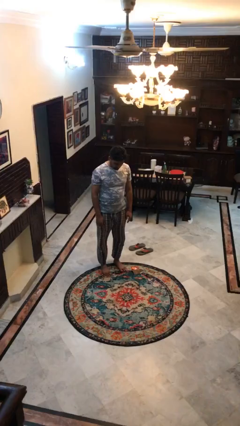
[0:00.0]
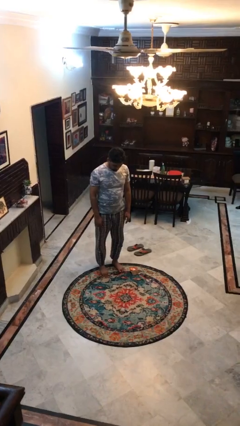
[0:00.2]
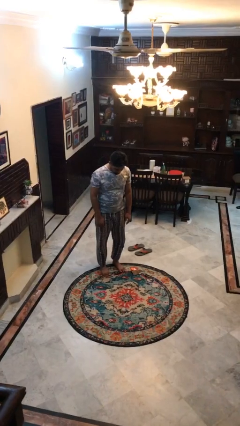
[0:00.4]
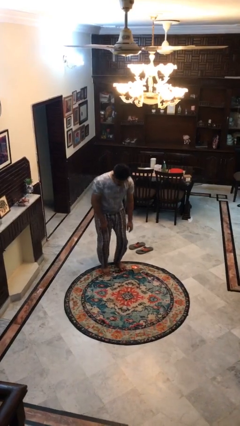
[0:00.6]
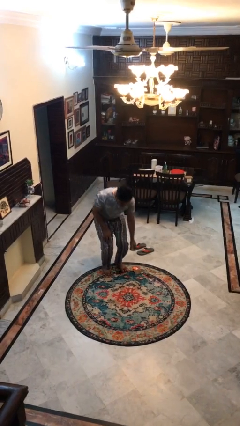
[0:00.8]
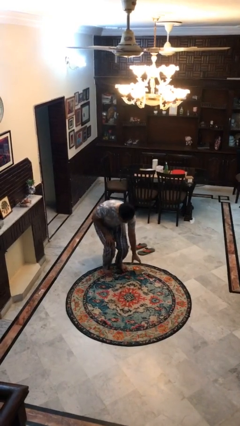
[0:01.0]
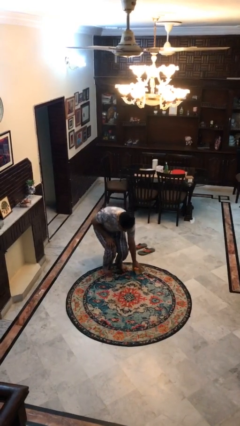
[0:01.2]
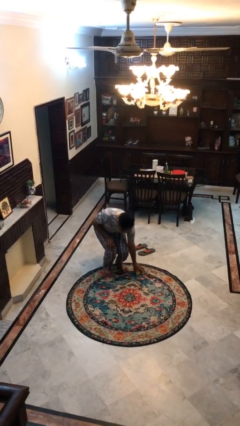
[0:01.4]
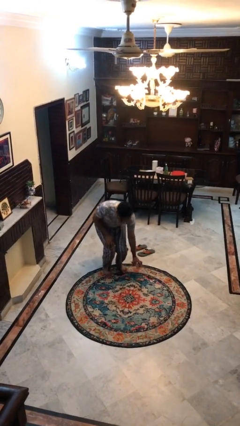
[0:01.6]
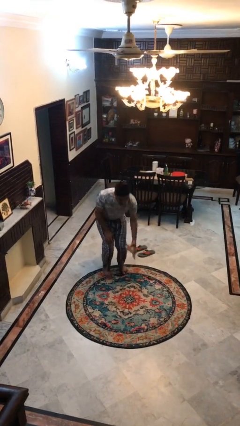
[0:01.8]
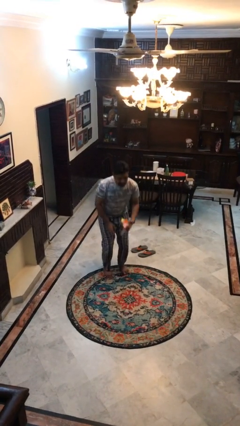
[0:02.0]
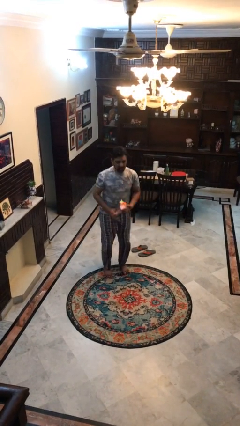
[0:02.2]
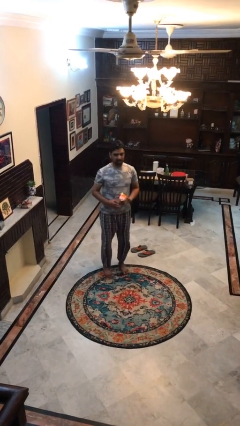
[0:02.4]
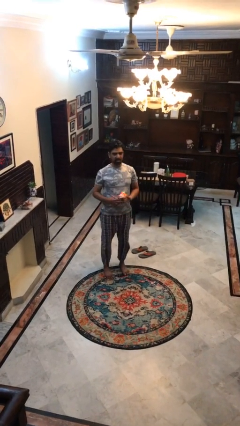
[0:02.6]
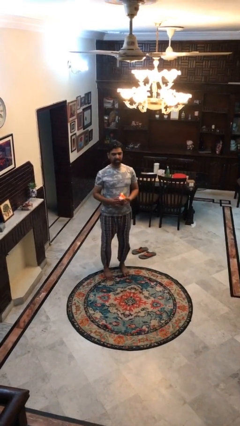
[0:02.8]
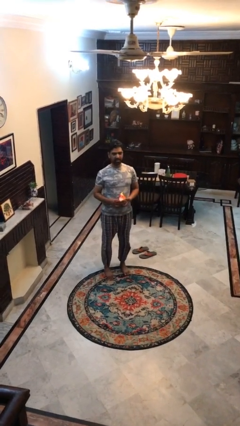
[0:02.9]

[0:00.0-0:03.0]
person picks up object from floor

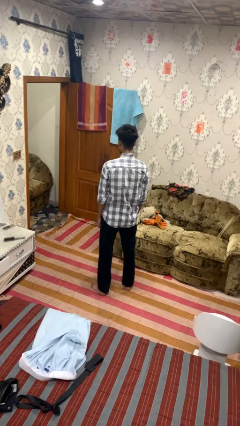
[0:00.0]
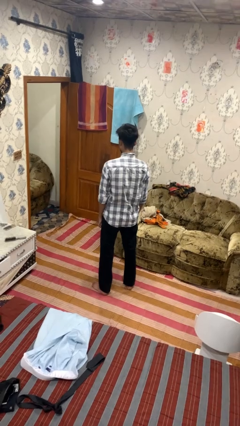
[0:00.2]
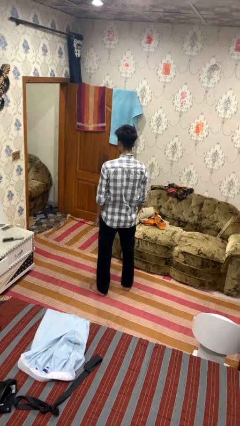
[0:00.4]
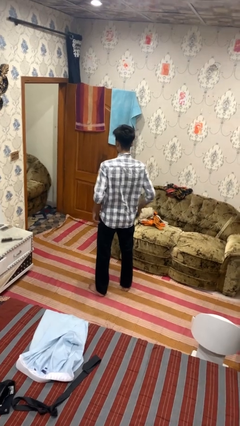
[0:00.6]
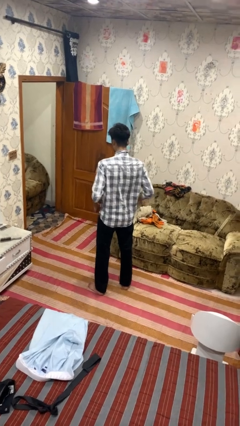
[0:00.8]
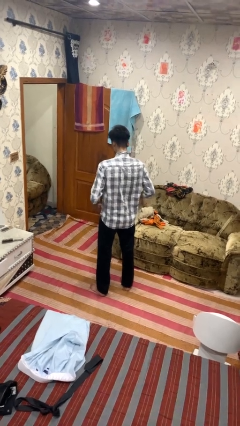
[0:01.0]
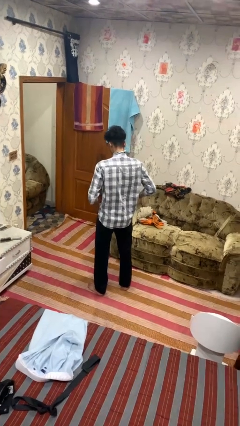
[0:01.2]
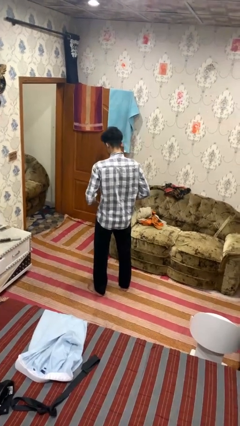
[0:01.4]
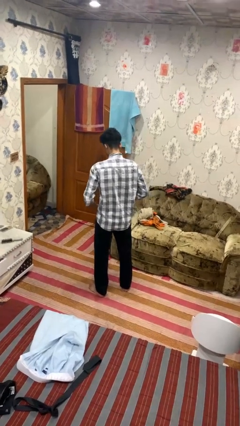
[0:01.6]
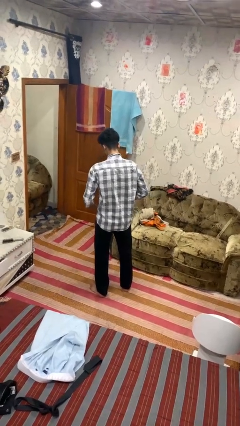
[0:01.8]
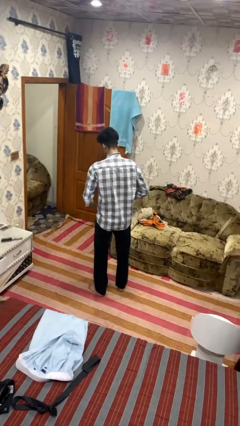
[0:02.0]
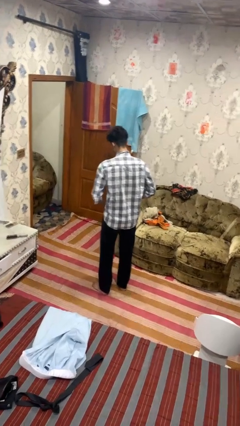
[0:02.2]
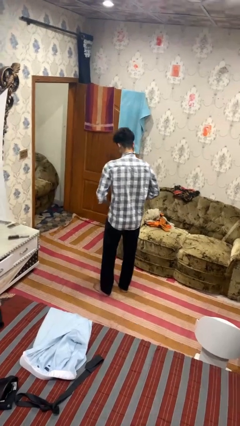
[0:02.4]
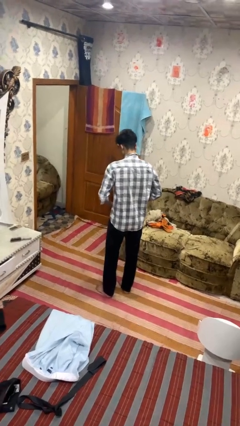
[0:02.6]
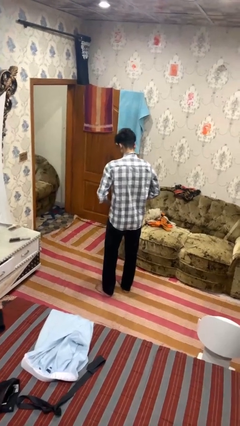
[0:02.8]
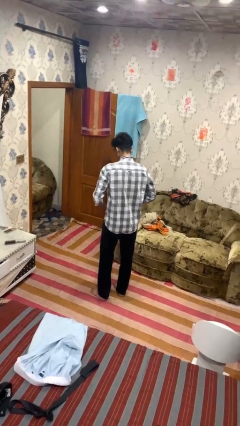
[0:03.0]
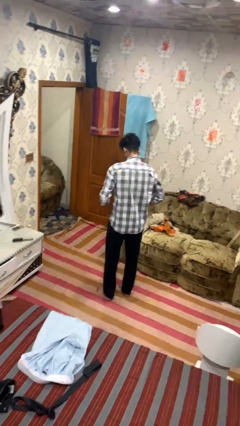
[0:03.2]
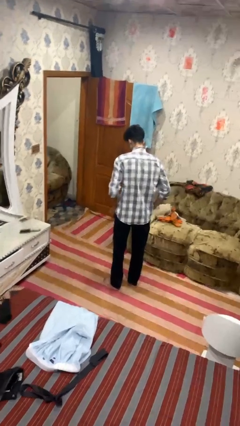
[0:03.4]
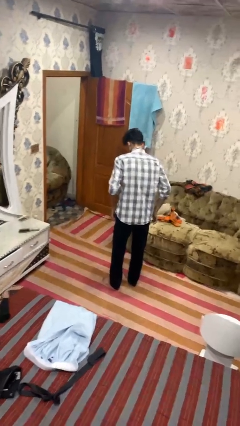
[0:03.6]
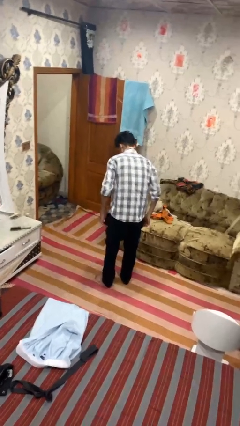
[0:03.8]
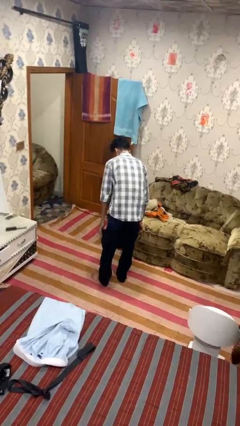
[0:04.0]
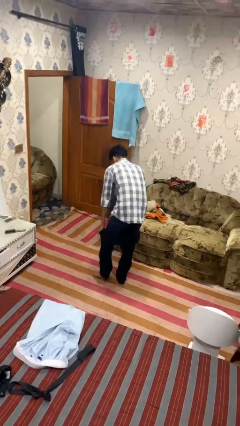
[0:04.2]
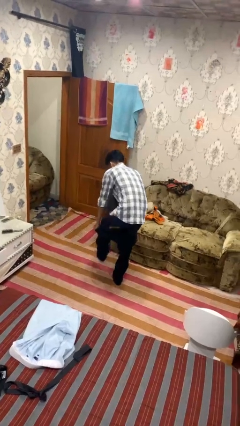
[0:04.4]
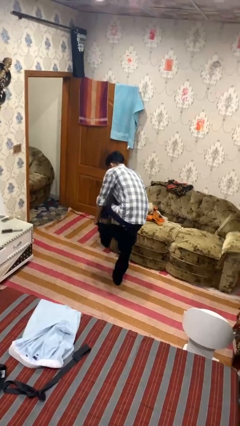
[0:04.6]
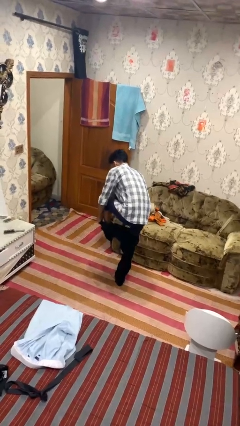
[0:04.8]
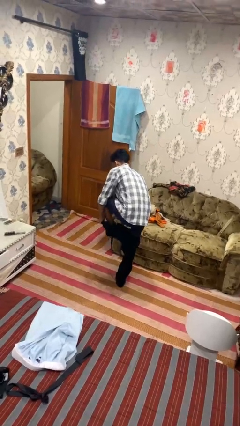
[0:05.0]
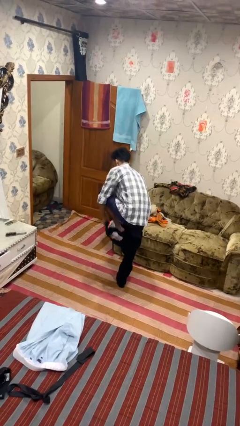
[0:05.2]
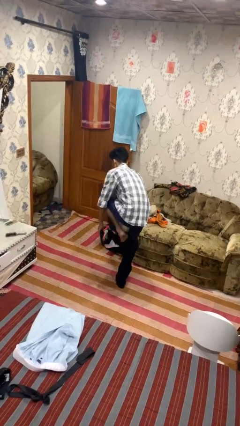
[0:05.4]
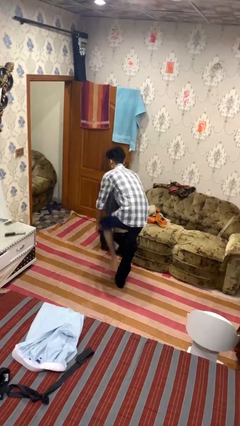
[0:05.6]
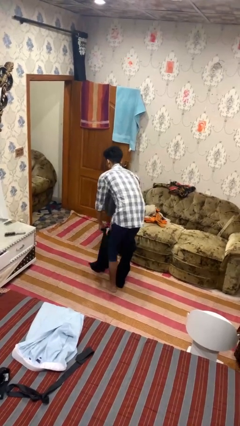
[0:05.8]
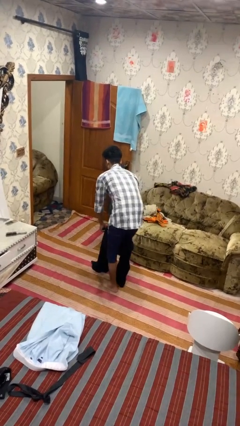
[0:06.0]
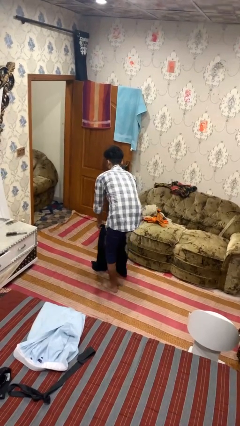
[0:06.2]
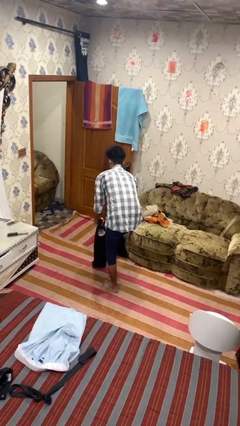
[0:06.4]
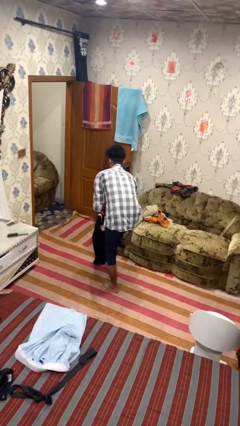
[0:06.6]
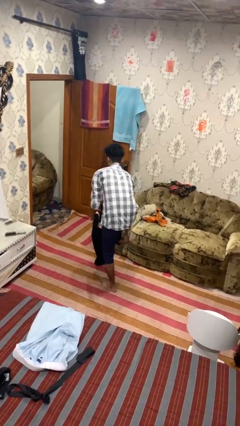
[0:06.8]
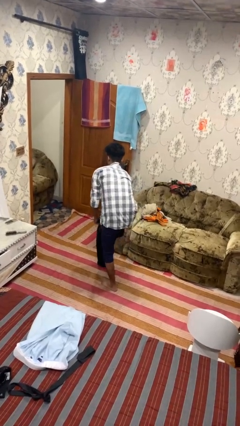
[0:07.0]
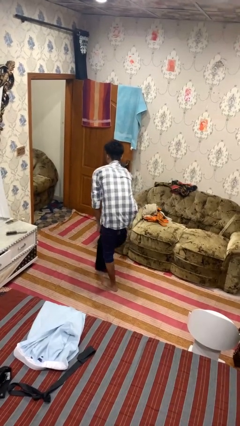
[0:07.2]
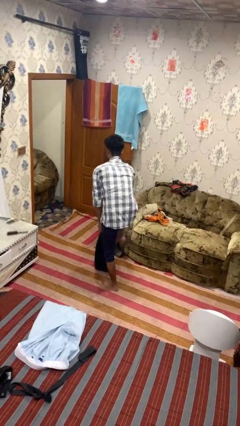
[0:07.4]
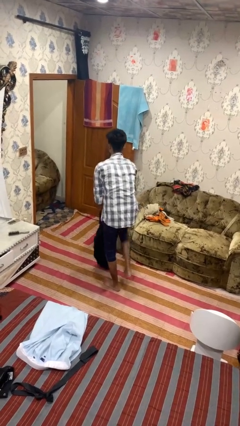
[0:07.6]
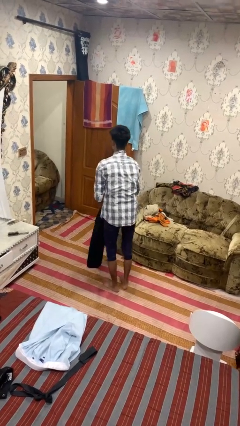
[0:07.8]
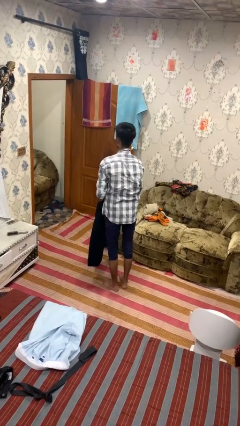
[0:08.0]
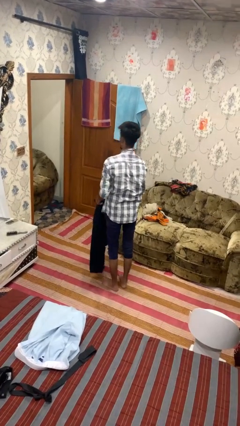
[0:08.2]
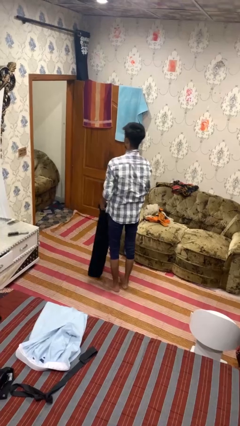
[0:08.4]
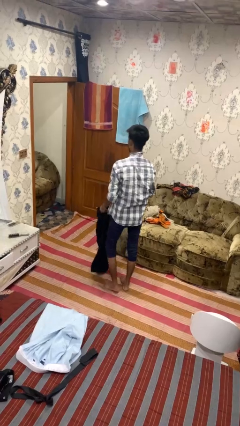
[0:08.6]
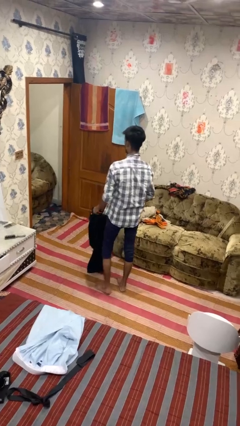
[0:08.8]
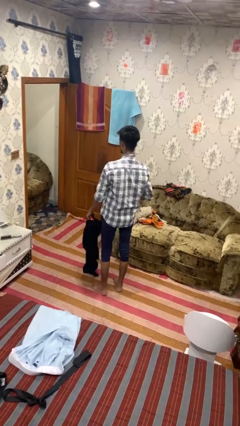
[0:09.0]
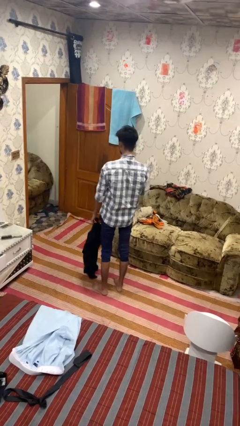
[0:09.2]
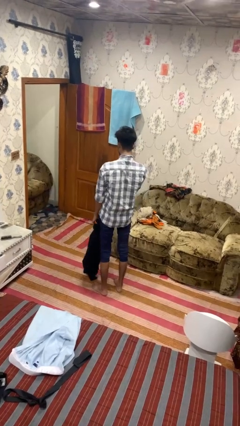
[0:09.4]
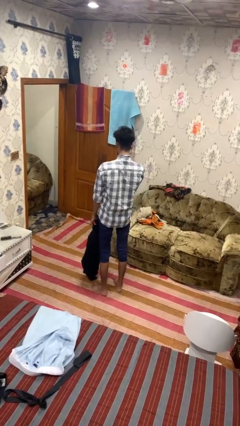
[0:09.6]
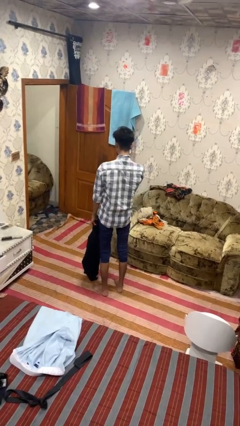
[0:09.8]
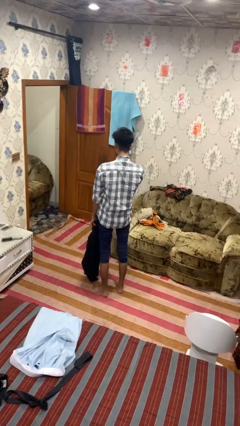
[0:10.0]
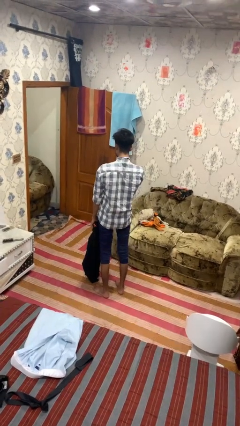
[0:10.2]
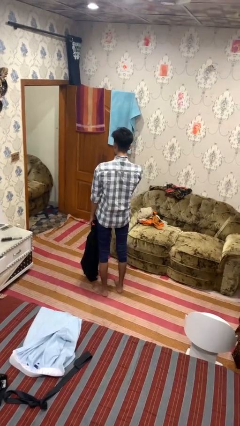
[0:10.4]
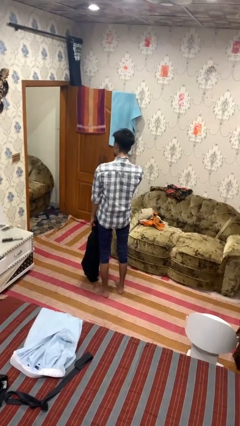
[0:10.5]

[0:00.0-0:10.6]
person takes off pants

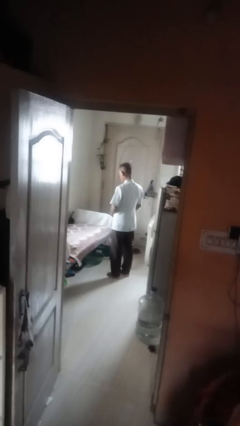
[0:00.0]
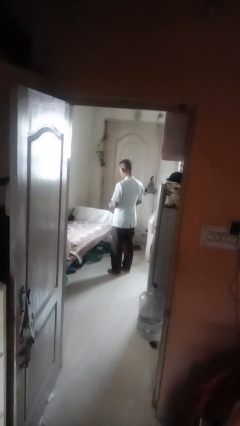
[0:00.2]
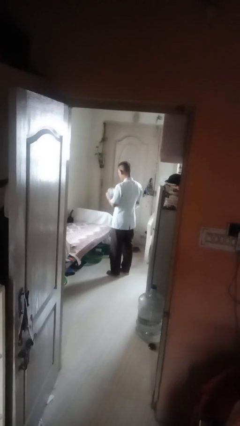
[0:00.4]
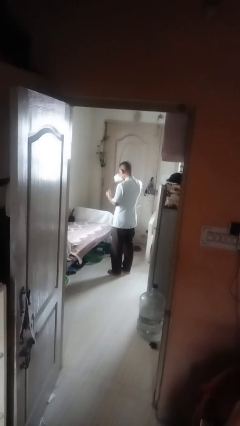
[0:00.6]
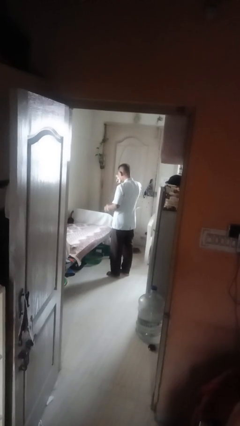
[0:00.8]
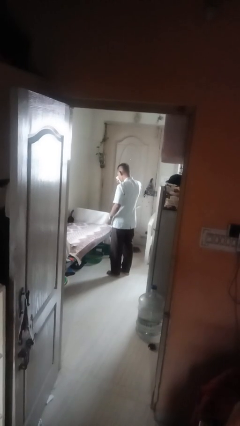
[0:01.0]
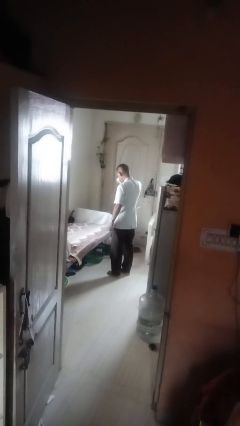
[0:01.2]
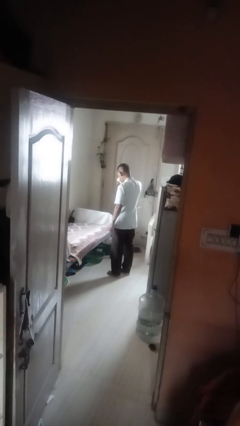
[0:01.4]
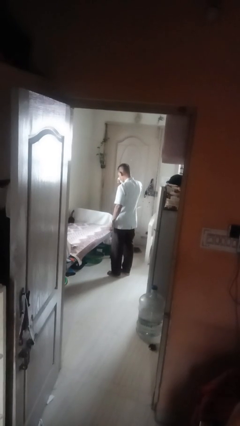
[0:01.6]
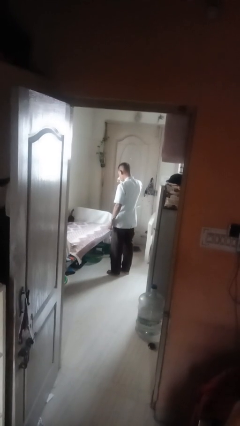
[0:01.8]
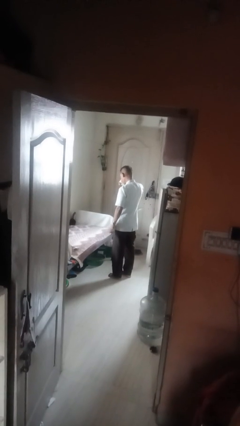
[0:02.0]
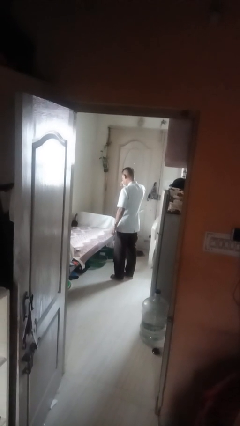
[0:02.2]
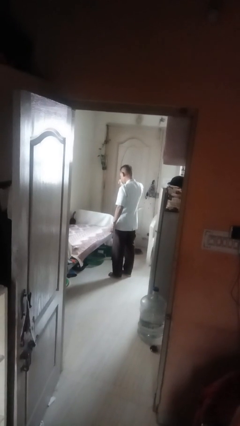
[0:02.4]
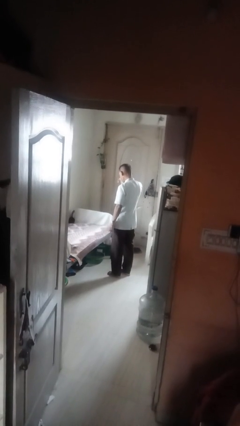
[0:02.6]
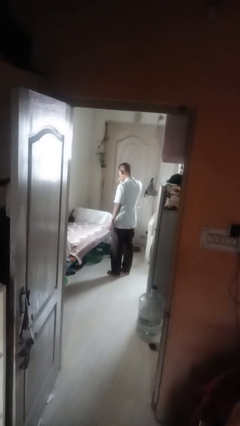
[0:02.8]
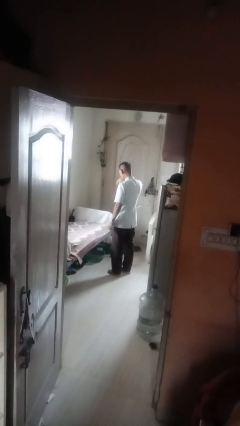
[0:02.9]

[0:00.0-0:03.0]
person blows nose

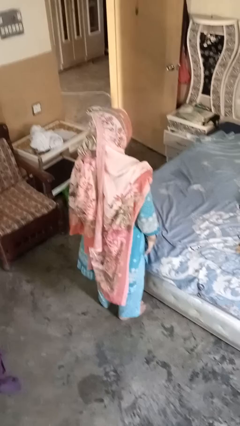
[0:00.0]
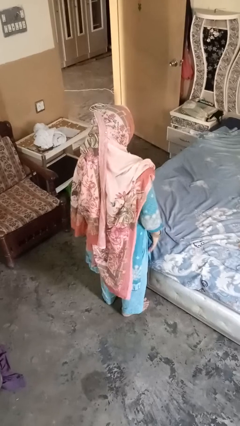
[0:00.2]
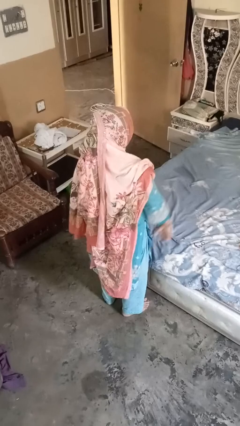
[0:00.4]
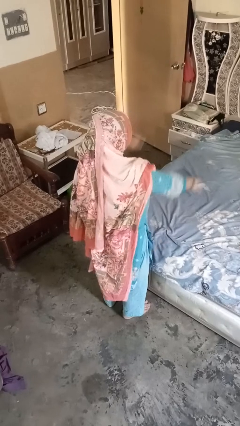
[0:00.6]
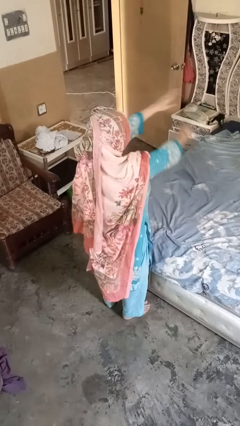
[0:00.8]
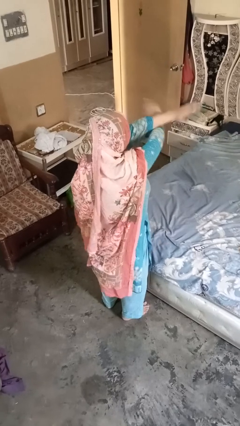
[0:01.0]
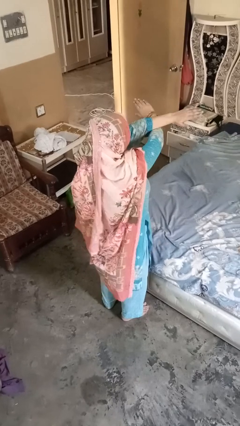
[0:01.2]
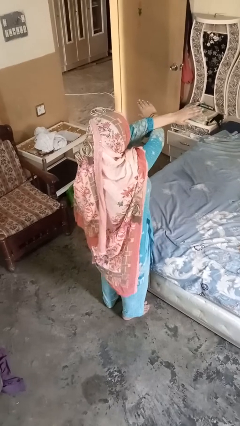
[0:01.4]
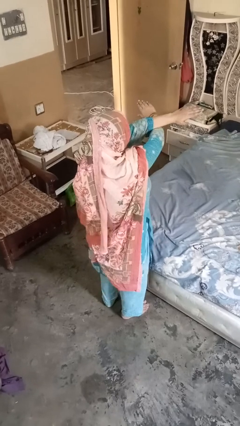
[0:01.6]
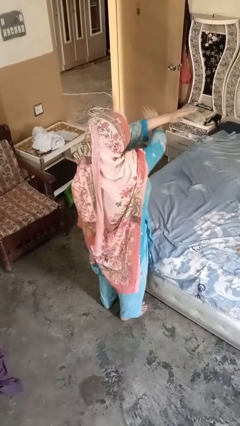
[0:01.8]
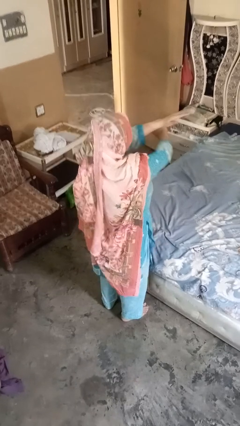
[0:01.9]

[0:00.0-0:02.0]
person gestures arms x
